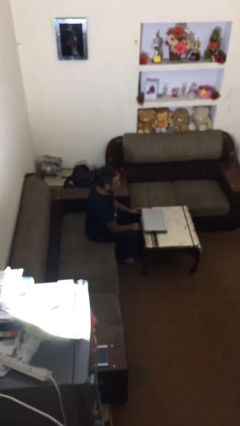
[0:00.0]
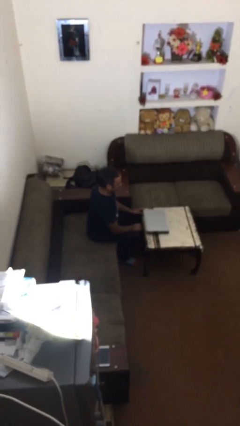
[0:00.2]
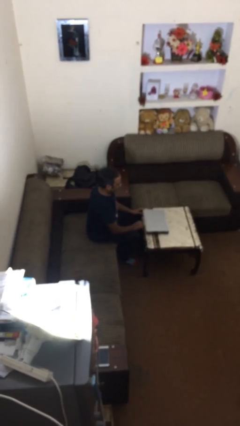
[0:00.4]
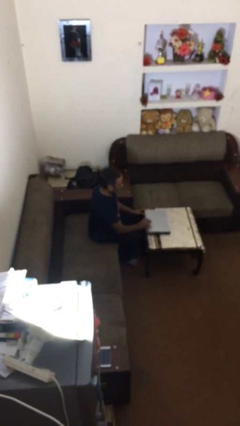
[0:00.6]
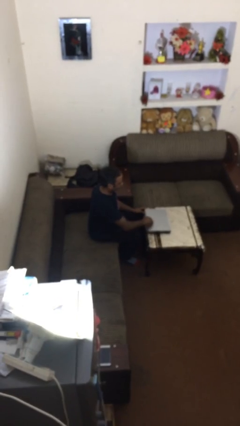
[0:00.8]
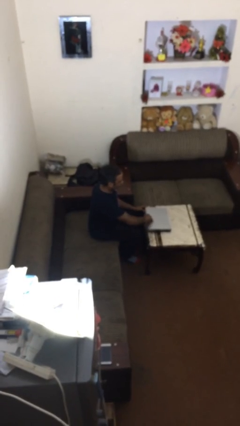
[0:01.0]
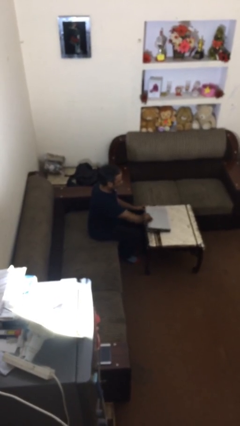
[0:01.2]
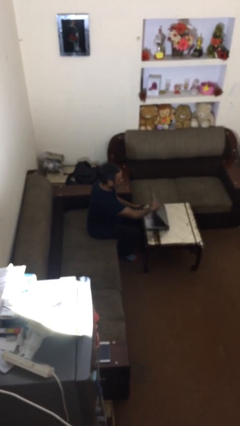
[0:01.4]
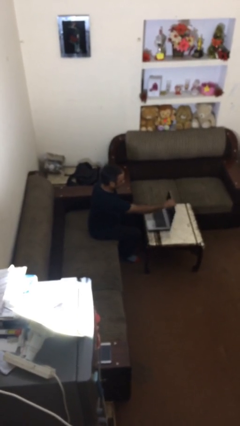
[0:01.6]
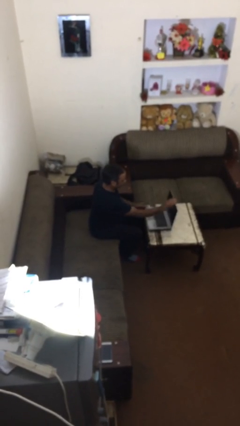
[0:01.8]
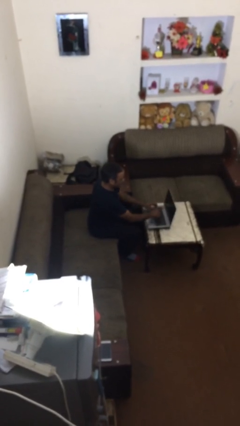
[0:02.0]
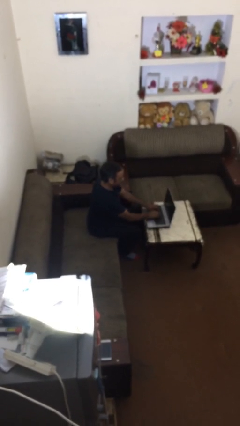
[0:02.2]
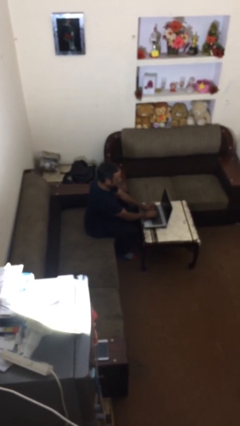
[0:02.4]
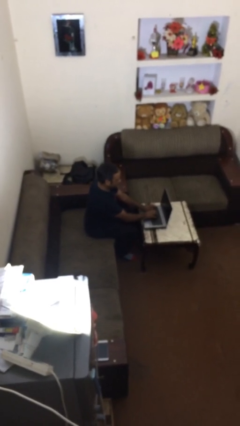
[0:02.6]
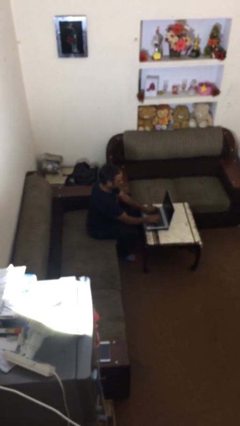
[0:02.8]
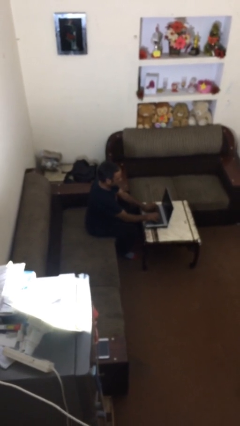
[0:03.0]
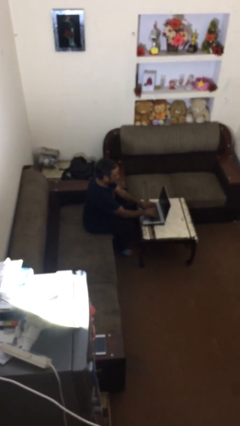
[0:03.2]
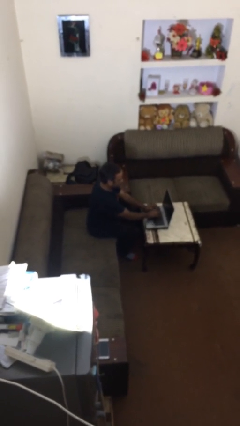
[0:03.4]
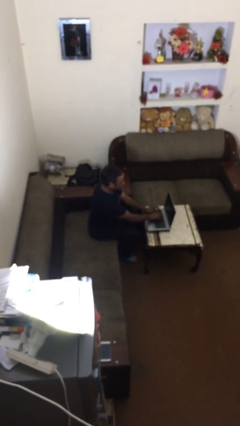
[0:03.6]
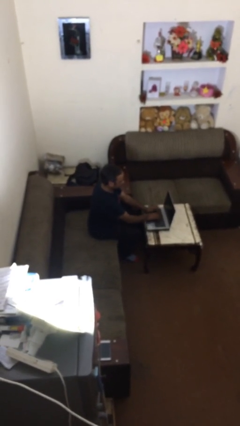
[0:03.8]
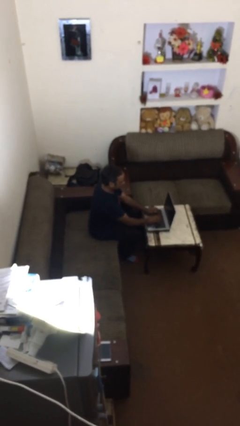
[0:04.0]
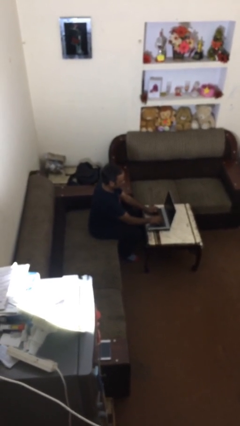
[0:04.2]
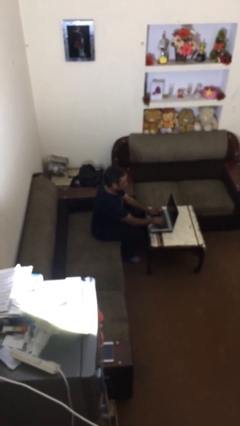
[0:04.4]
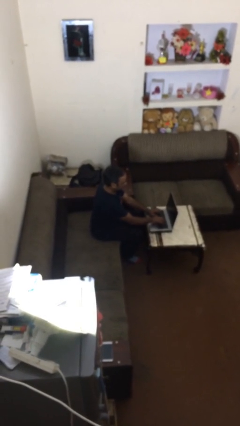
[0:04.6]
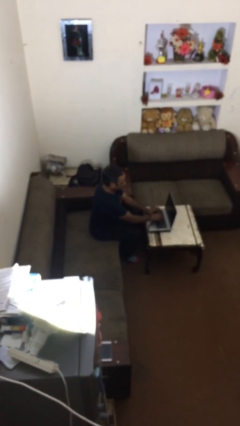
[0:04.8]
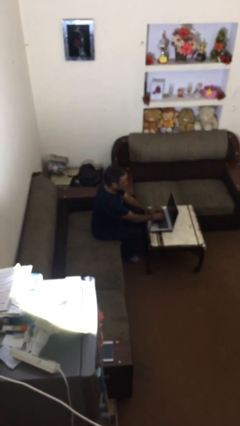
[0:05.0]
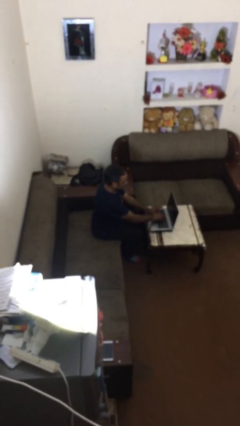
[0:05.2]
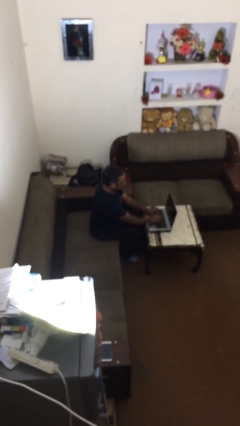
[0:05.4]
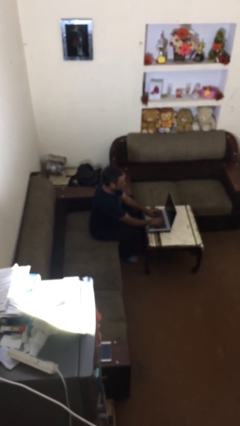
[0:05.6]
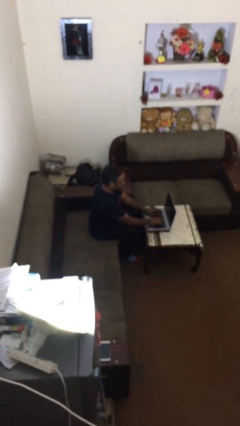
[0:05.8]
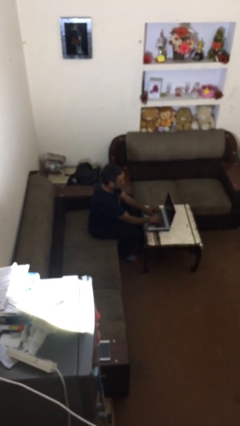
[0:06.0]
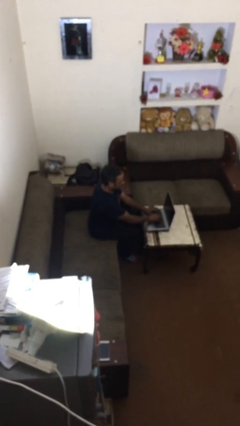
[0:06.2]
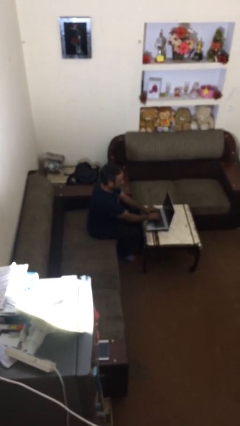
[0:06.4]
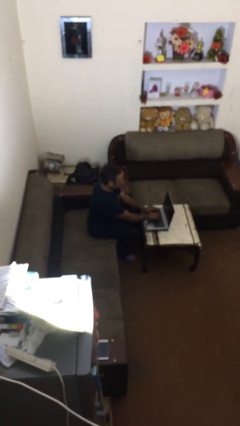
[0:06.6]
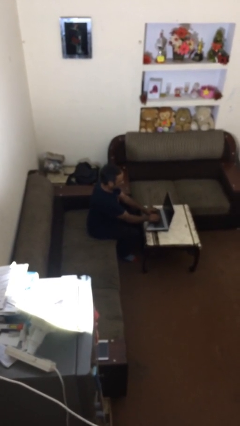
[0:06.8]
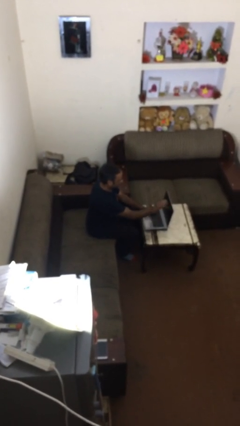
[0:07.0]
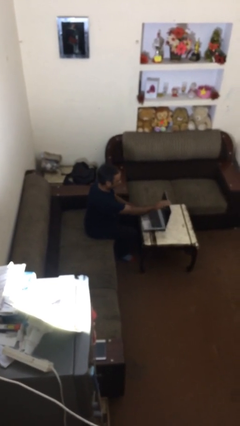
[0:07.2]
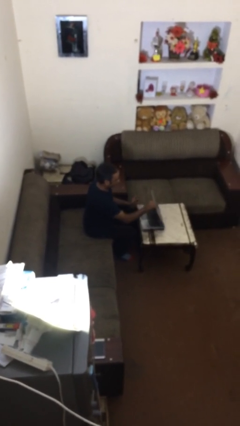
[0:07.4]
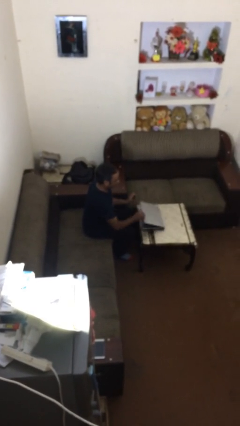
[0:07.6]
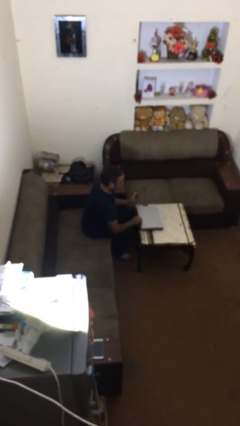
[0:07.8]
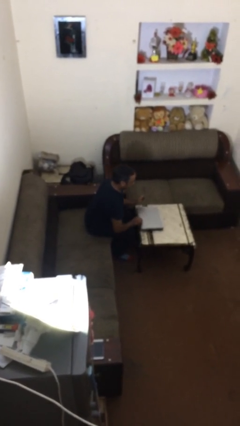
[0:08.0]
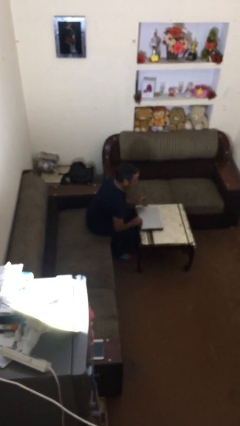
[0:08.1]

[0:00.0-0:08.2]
person interacts with laptop

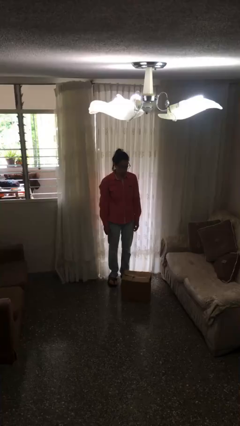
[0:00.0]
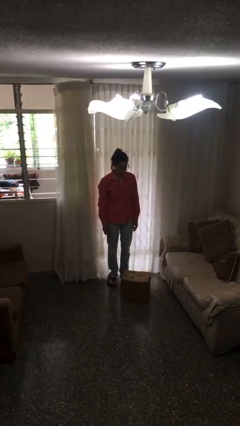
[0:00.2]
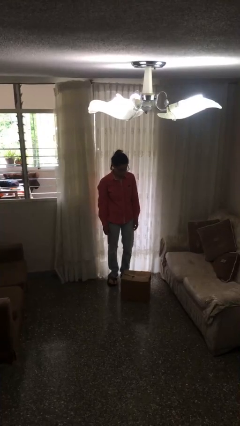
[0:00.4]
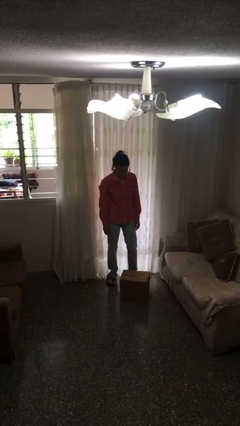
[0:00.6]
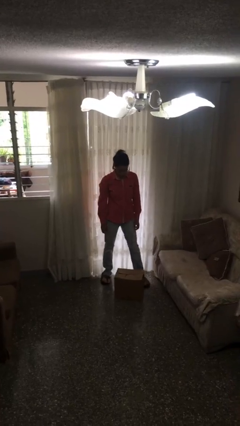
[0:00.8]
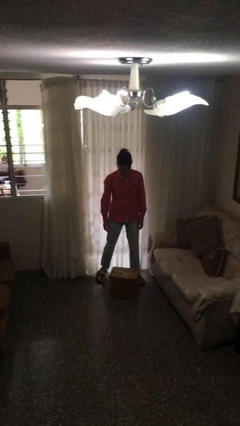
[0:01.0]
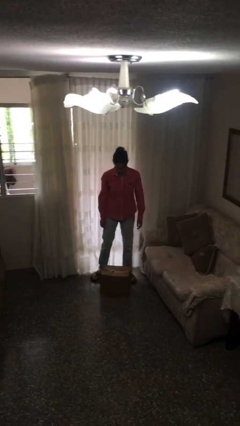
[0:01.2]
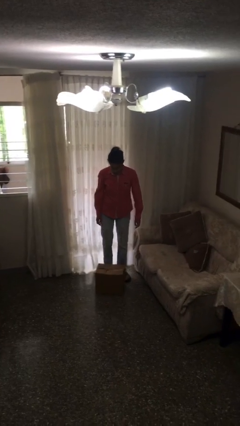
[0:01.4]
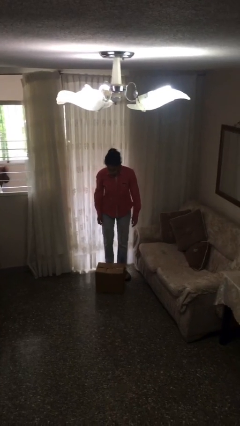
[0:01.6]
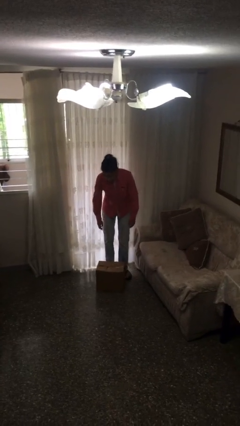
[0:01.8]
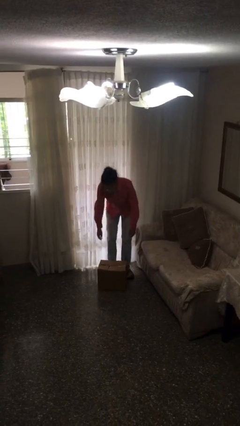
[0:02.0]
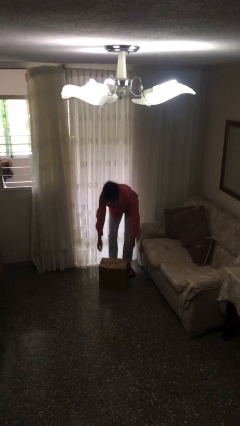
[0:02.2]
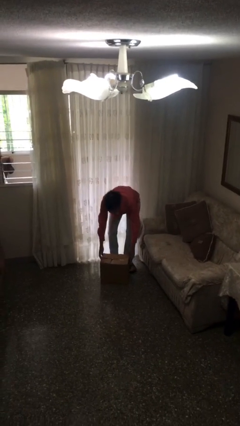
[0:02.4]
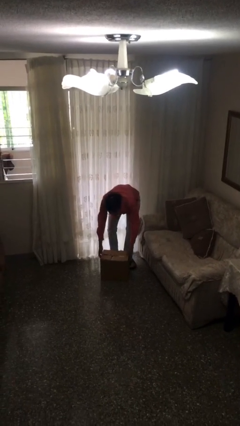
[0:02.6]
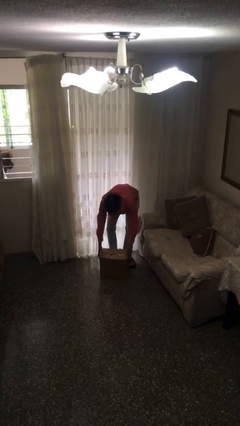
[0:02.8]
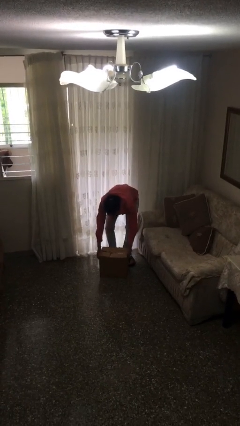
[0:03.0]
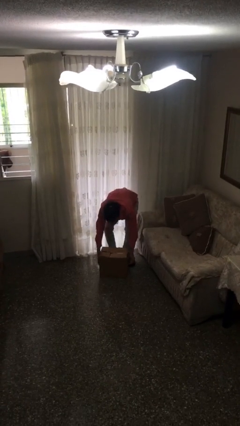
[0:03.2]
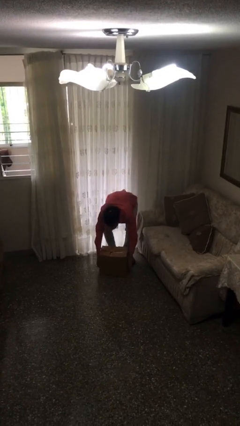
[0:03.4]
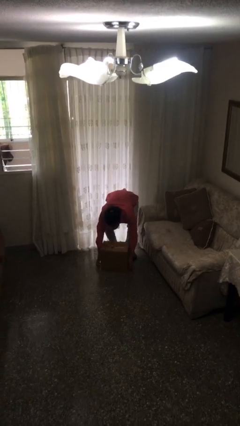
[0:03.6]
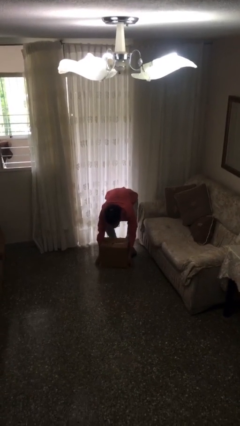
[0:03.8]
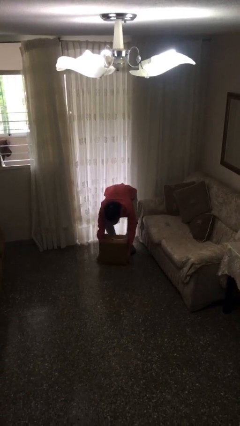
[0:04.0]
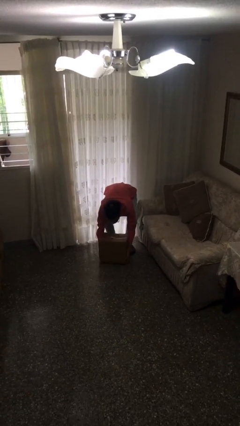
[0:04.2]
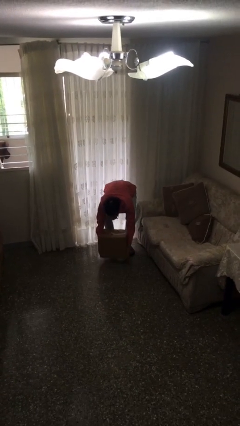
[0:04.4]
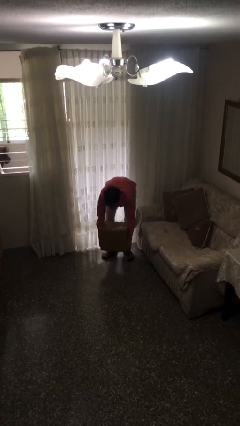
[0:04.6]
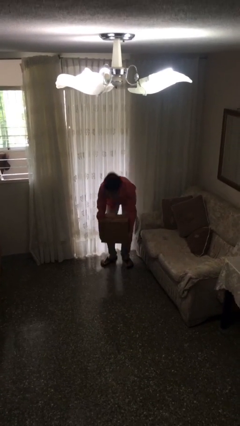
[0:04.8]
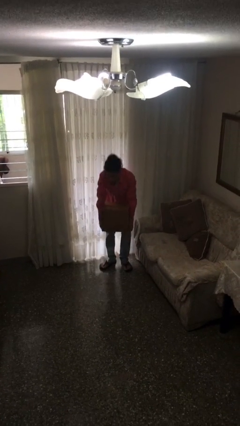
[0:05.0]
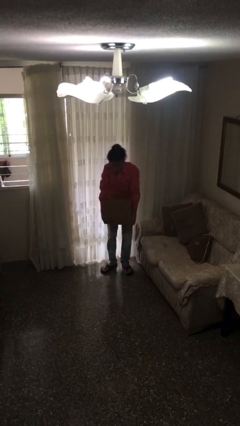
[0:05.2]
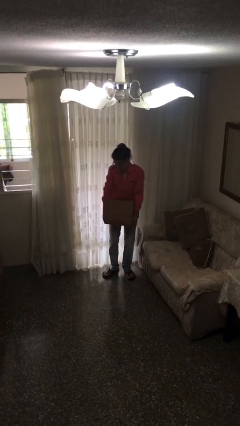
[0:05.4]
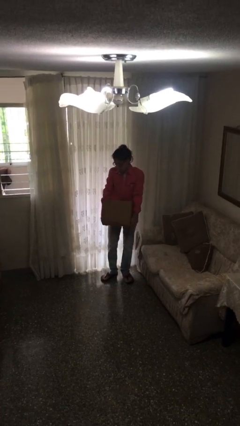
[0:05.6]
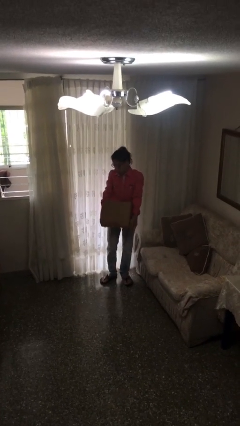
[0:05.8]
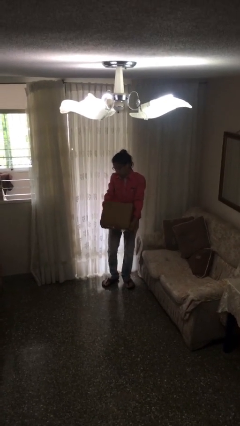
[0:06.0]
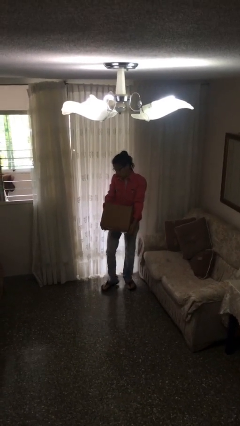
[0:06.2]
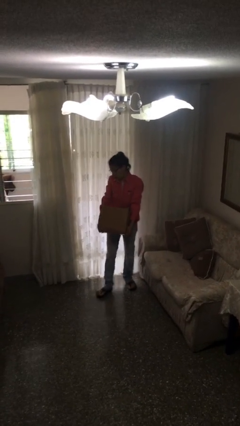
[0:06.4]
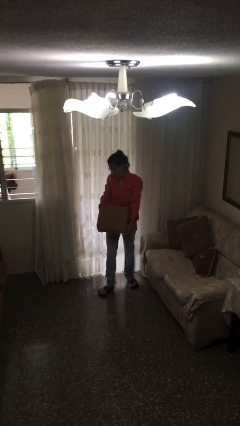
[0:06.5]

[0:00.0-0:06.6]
person picks up object from floor

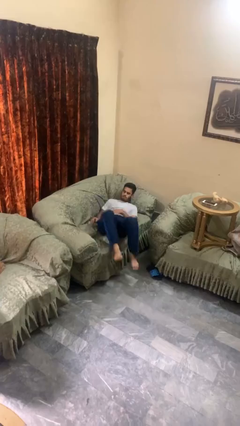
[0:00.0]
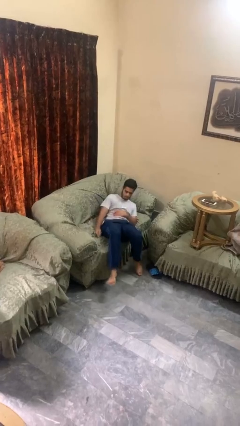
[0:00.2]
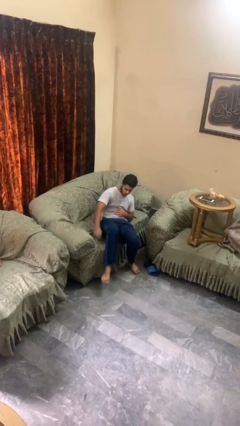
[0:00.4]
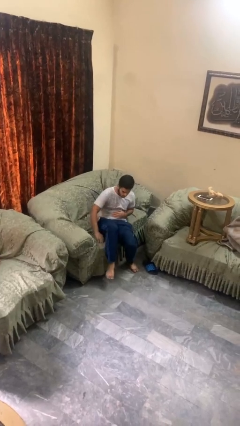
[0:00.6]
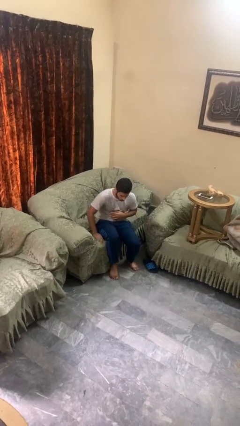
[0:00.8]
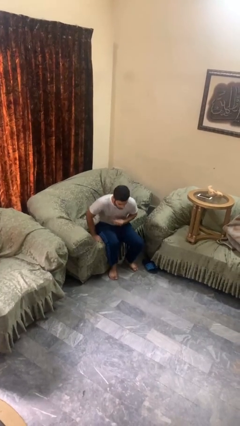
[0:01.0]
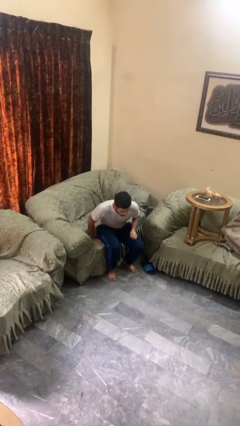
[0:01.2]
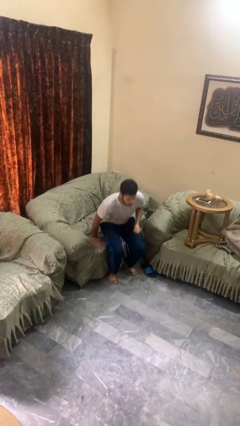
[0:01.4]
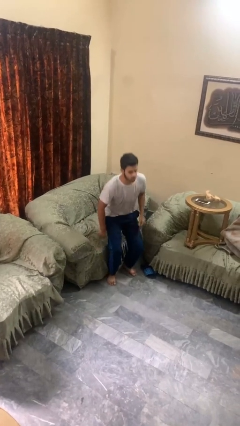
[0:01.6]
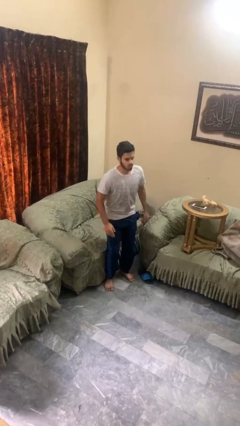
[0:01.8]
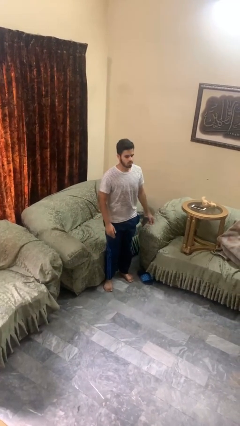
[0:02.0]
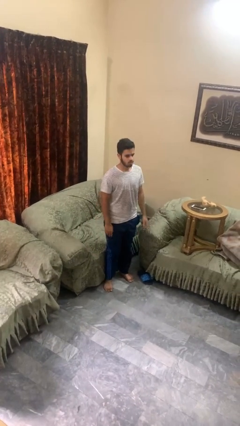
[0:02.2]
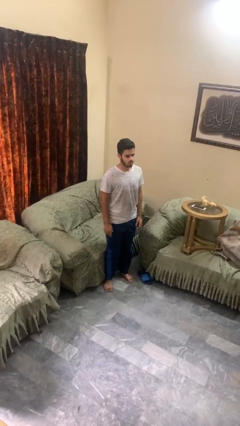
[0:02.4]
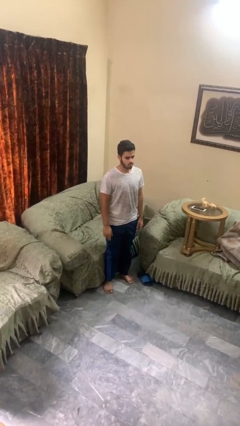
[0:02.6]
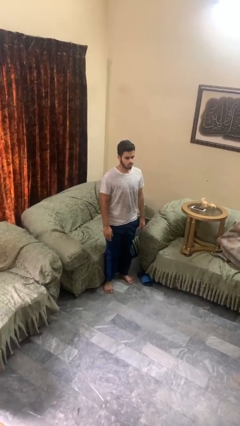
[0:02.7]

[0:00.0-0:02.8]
person stands up
